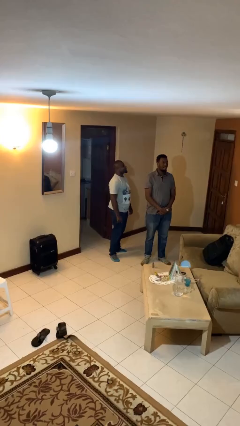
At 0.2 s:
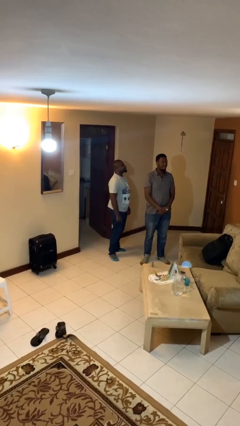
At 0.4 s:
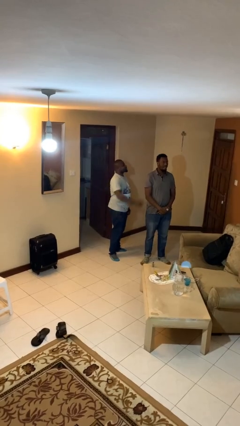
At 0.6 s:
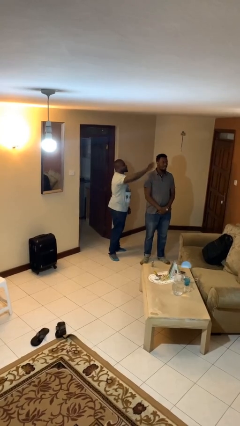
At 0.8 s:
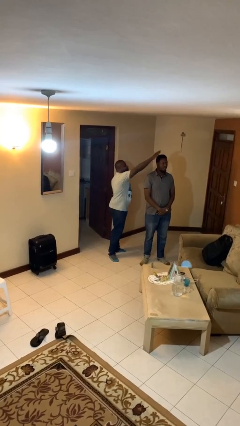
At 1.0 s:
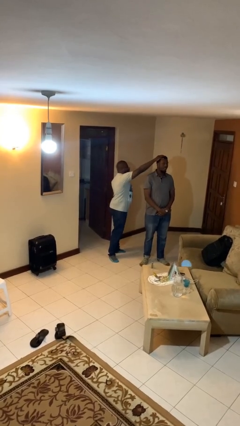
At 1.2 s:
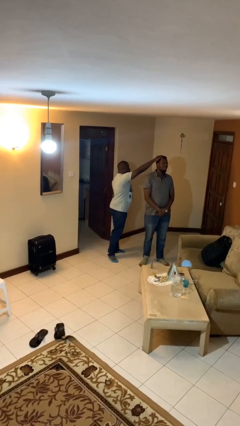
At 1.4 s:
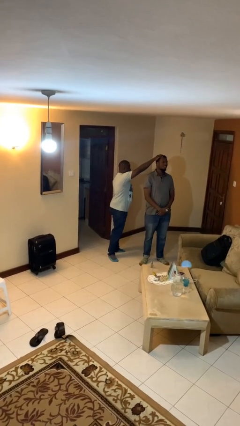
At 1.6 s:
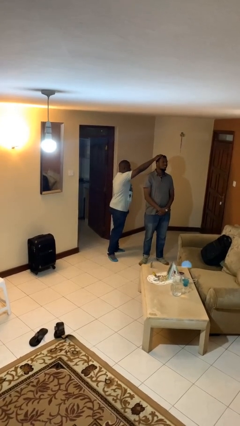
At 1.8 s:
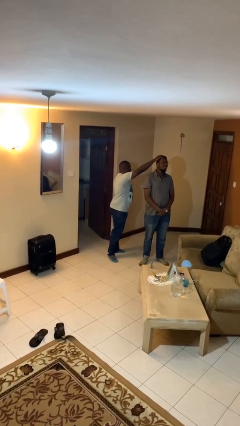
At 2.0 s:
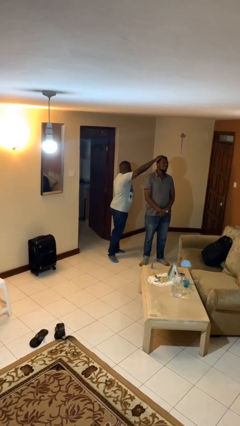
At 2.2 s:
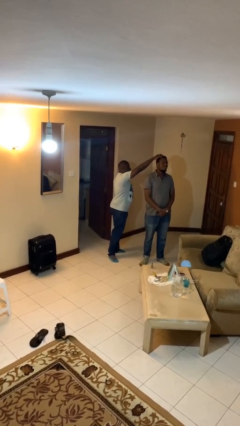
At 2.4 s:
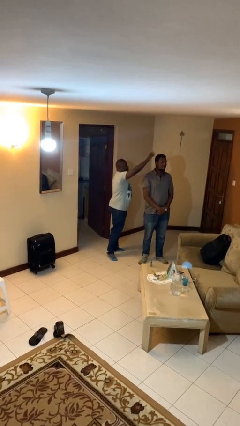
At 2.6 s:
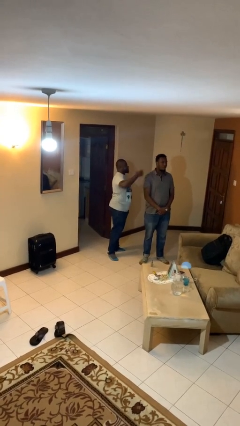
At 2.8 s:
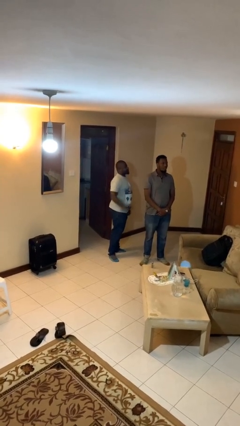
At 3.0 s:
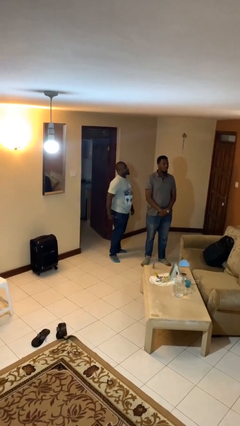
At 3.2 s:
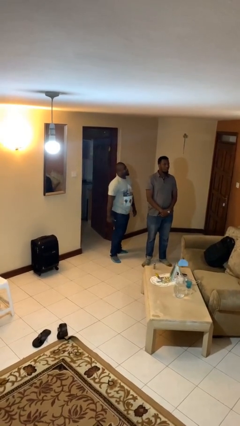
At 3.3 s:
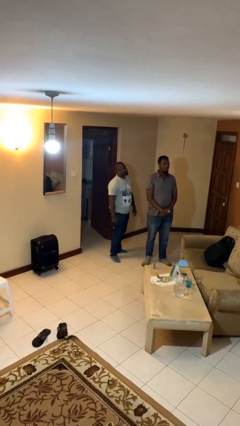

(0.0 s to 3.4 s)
person grabs person by hair

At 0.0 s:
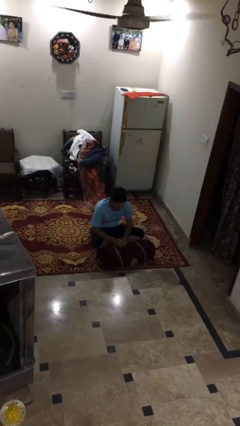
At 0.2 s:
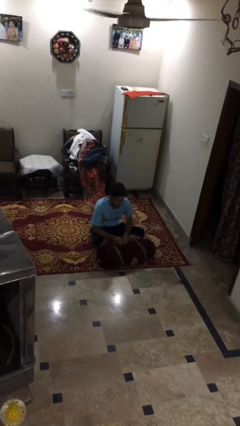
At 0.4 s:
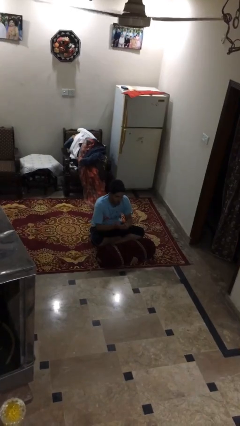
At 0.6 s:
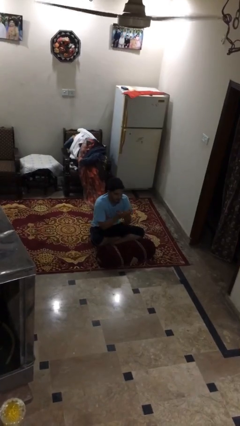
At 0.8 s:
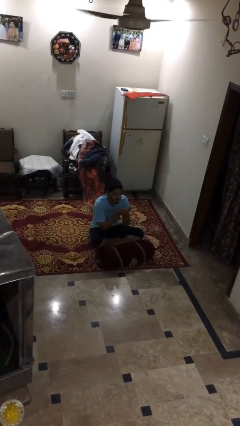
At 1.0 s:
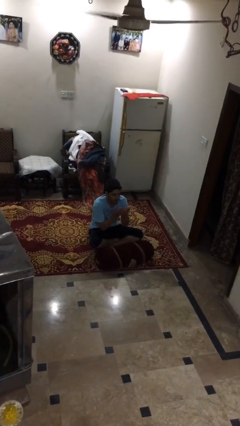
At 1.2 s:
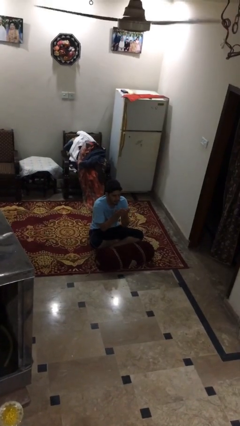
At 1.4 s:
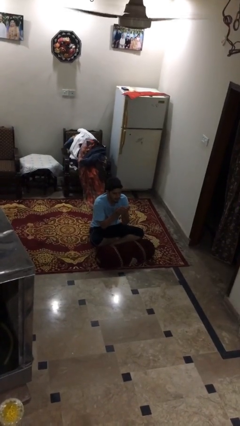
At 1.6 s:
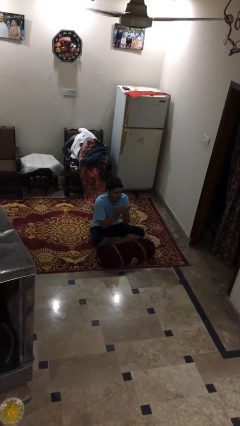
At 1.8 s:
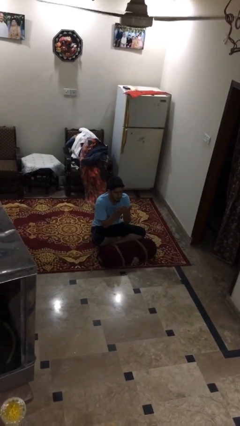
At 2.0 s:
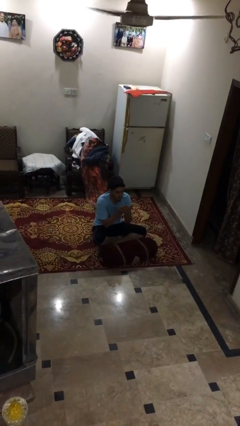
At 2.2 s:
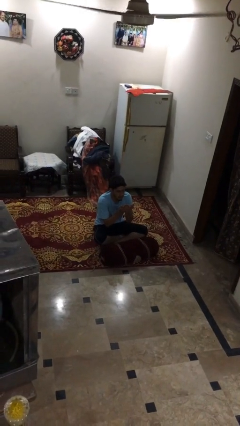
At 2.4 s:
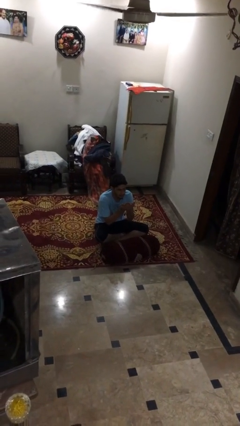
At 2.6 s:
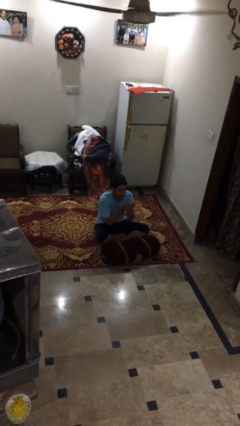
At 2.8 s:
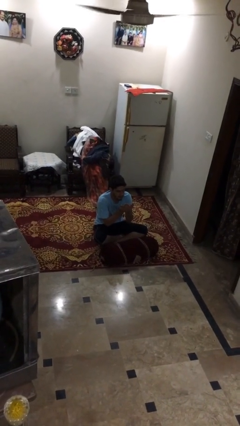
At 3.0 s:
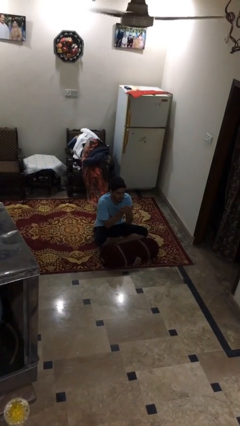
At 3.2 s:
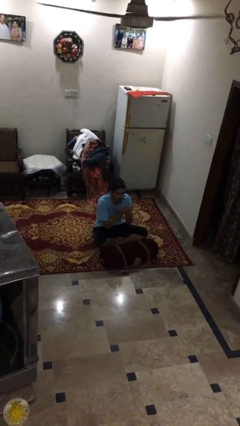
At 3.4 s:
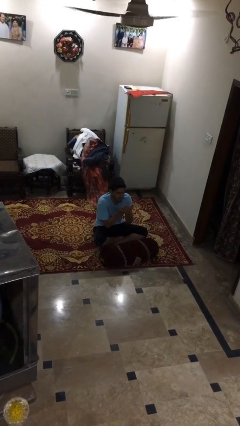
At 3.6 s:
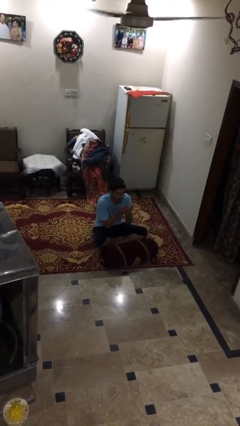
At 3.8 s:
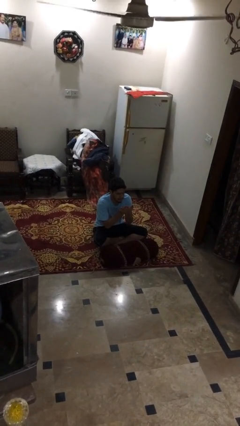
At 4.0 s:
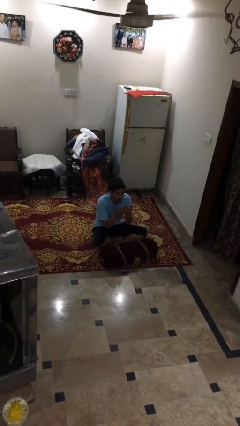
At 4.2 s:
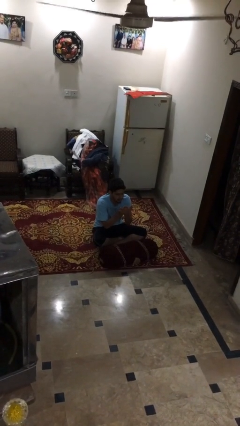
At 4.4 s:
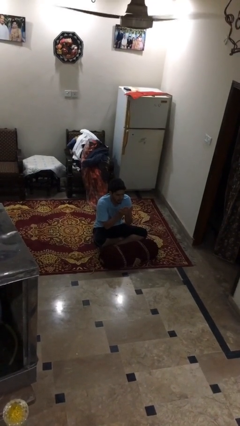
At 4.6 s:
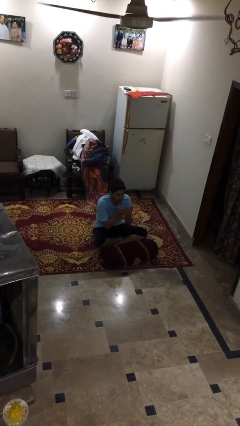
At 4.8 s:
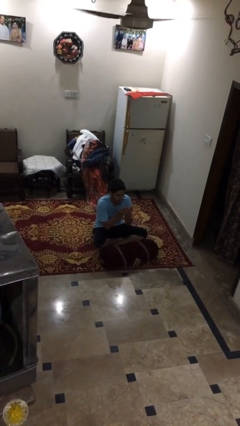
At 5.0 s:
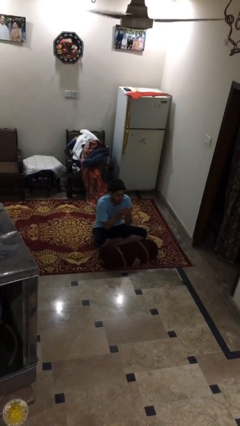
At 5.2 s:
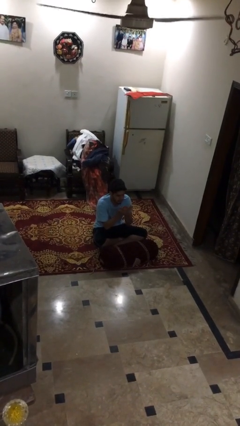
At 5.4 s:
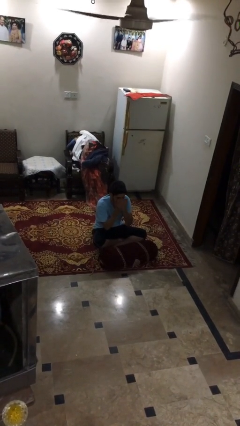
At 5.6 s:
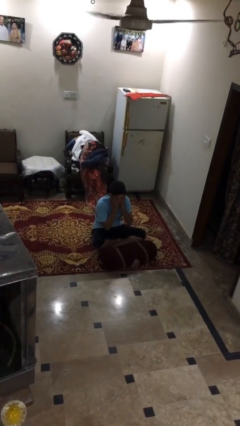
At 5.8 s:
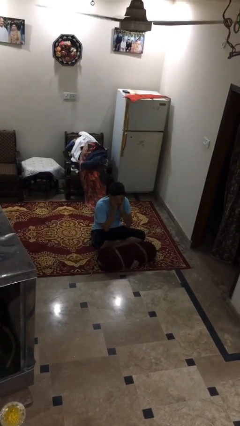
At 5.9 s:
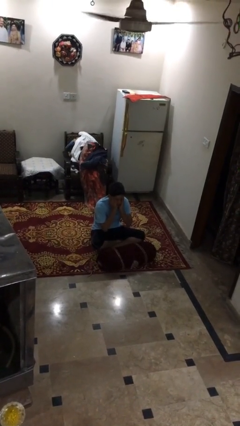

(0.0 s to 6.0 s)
person prays

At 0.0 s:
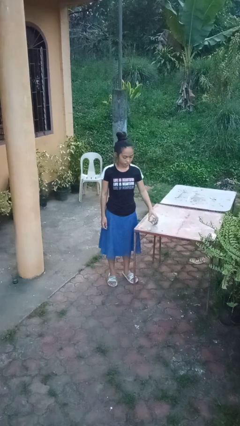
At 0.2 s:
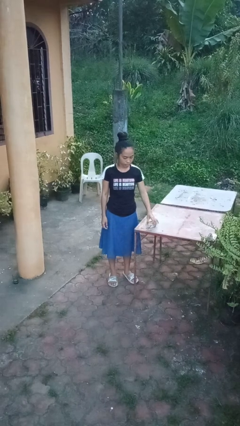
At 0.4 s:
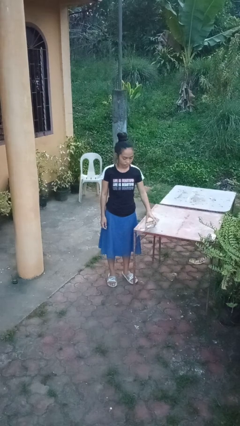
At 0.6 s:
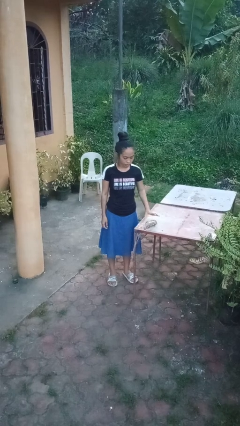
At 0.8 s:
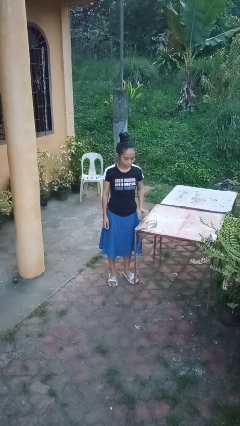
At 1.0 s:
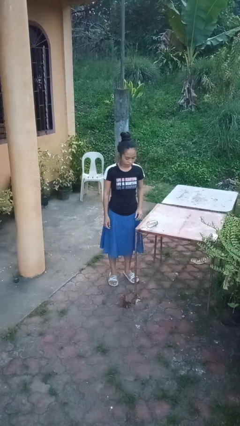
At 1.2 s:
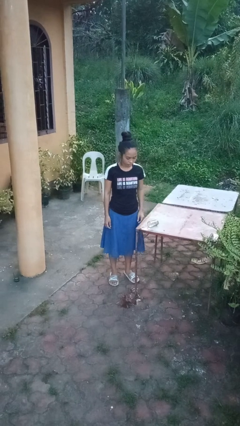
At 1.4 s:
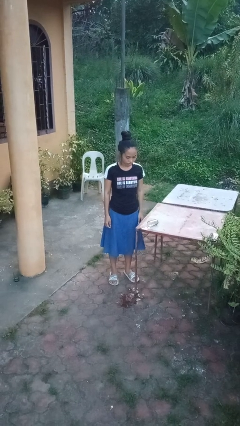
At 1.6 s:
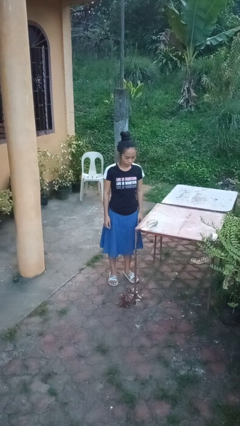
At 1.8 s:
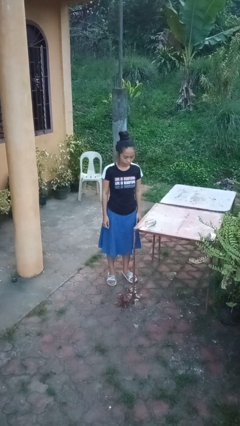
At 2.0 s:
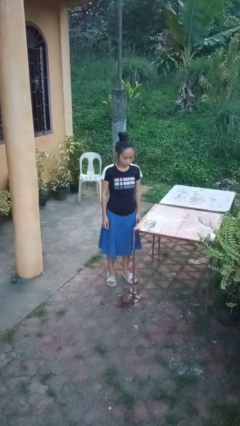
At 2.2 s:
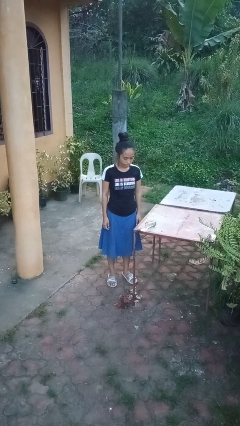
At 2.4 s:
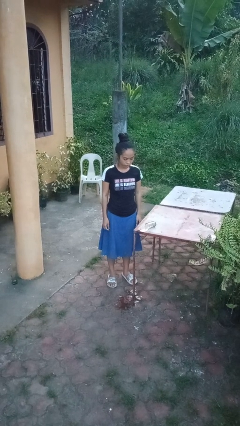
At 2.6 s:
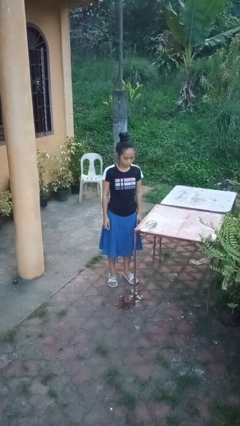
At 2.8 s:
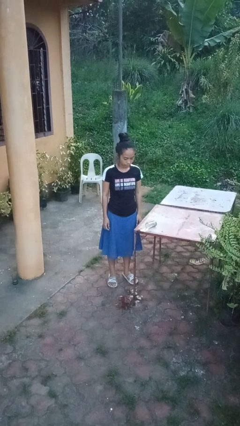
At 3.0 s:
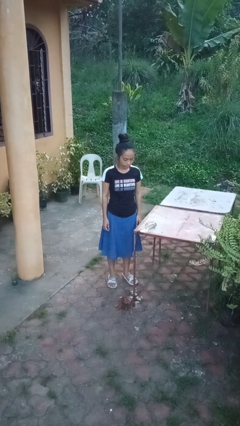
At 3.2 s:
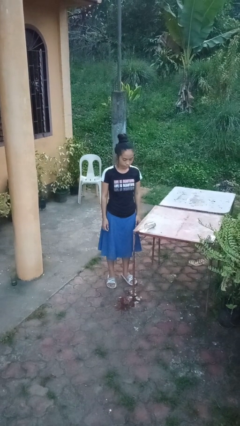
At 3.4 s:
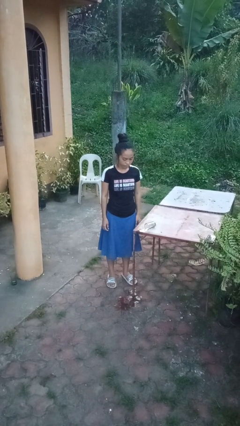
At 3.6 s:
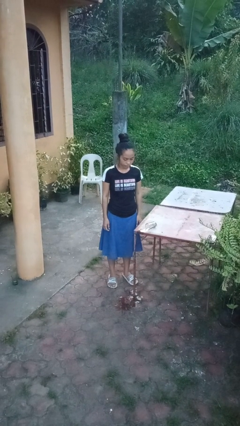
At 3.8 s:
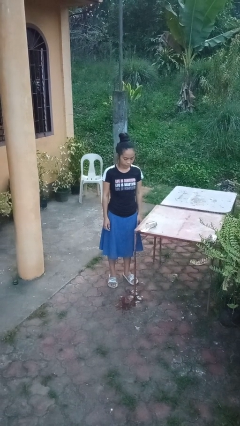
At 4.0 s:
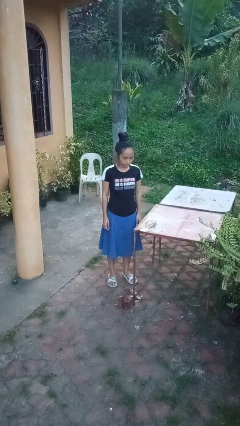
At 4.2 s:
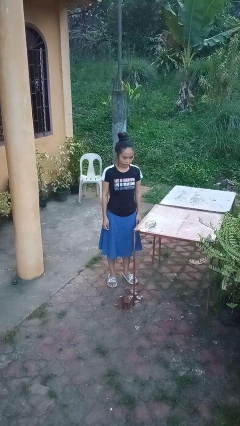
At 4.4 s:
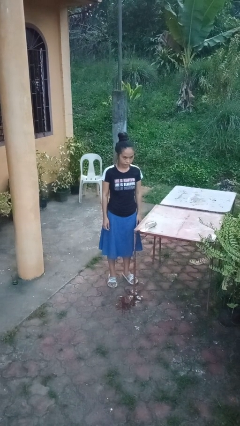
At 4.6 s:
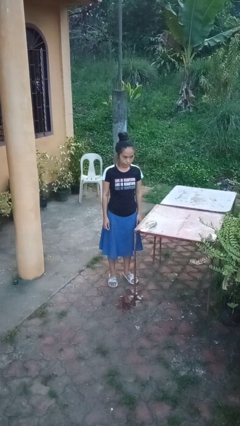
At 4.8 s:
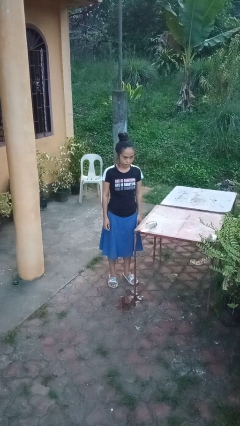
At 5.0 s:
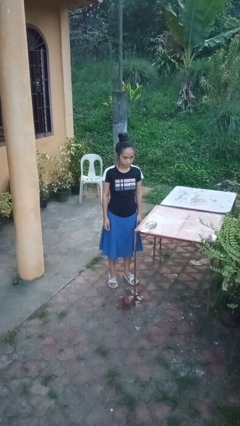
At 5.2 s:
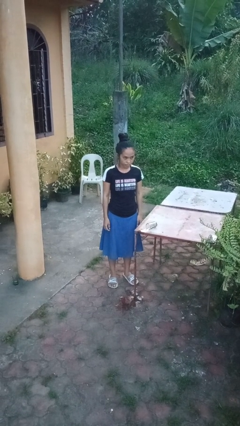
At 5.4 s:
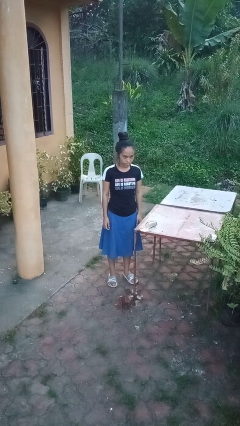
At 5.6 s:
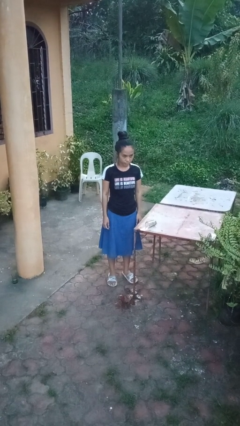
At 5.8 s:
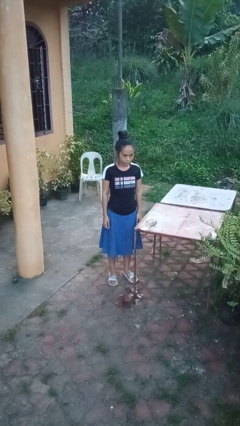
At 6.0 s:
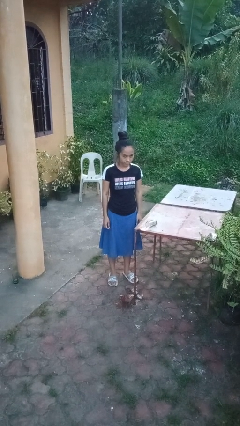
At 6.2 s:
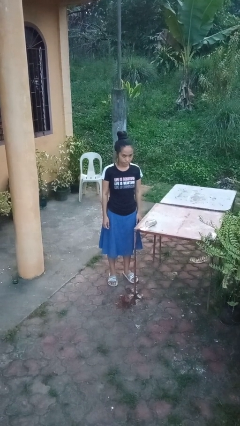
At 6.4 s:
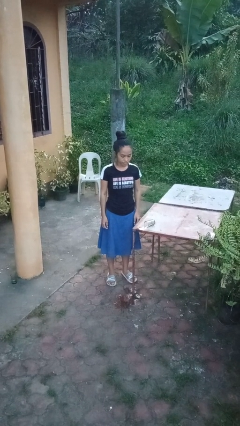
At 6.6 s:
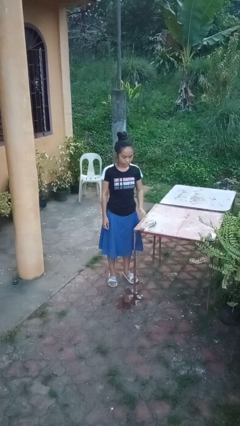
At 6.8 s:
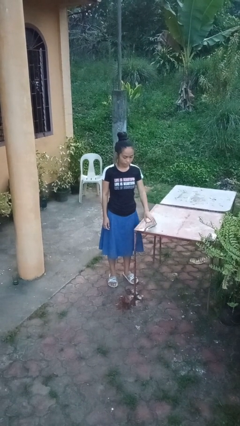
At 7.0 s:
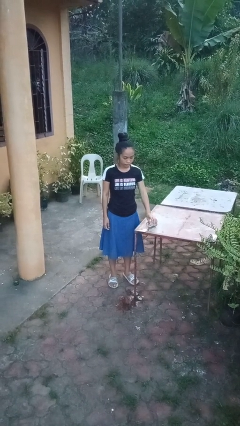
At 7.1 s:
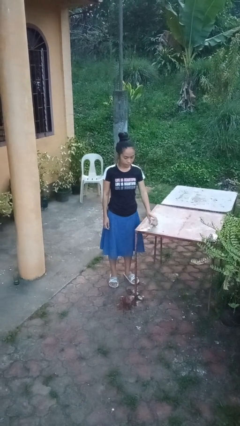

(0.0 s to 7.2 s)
person spills on table

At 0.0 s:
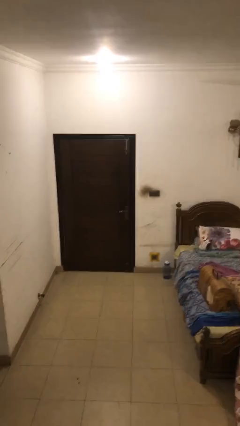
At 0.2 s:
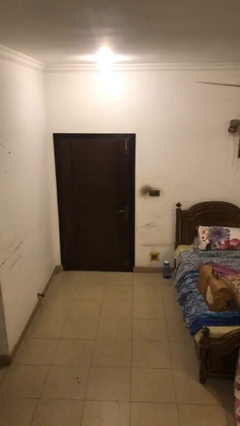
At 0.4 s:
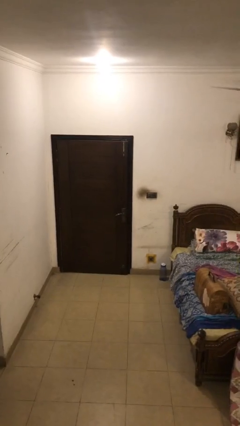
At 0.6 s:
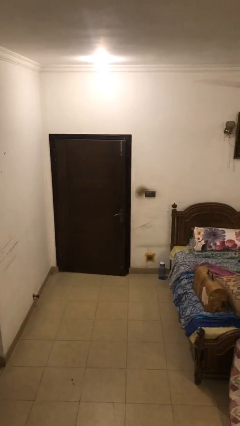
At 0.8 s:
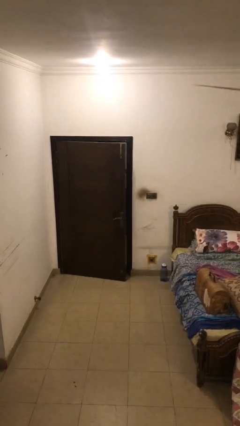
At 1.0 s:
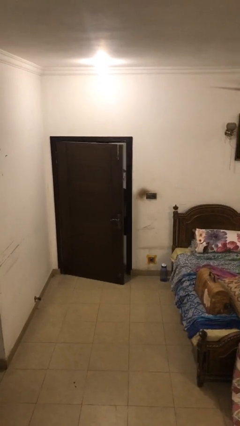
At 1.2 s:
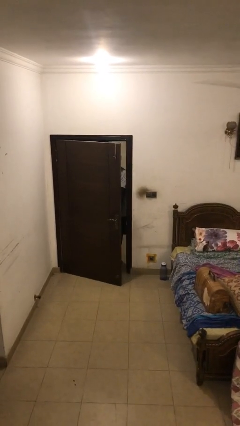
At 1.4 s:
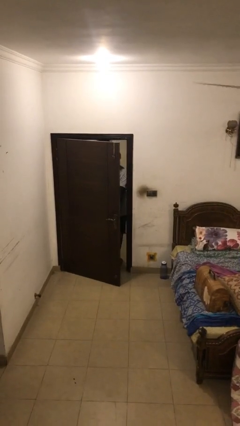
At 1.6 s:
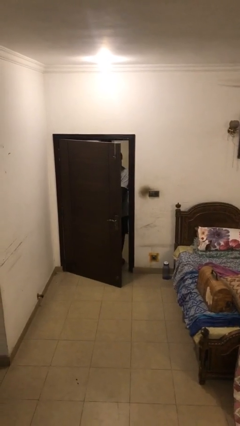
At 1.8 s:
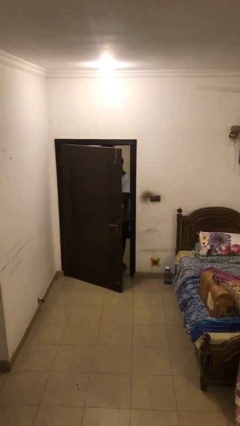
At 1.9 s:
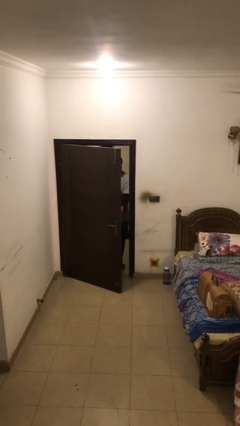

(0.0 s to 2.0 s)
person opens facility door
